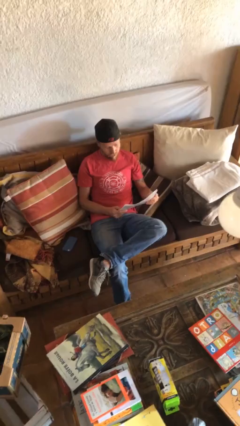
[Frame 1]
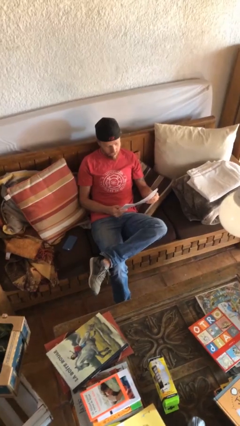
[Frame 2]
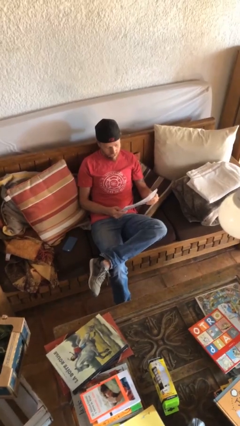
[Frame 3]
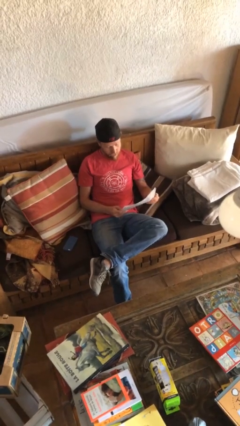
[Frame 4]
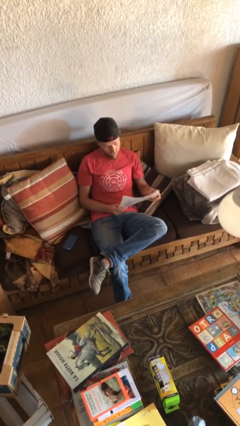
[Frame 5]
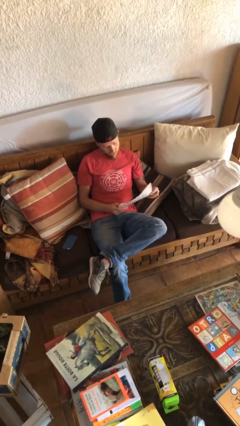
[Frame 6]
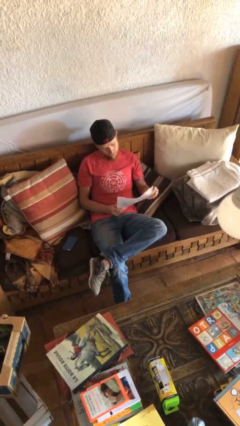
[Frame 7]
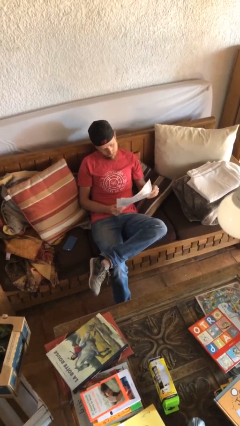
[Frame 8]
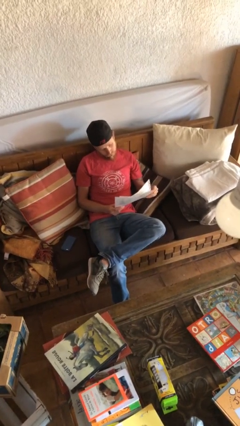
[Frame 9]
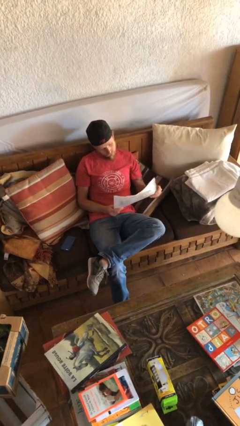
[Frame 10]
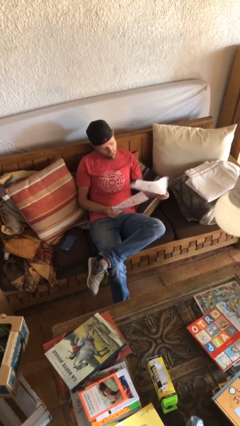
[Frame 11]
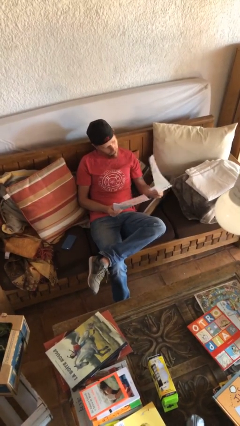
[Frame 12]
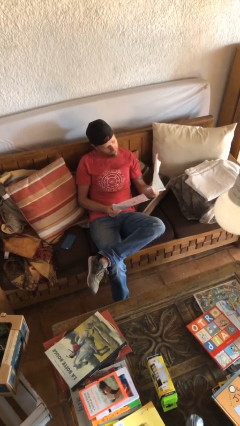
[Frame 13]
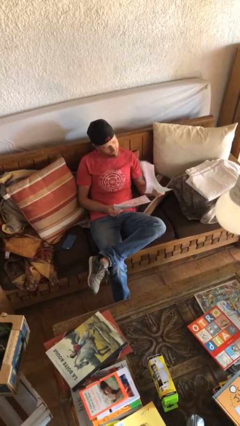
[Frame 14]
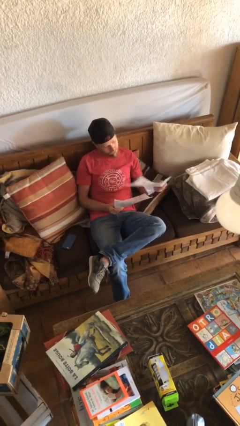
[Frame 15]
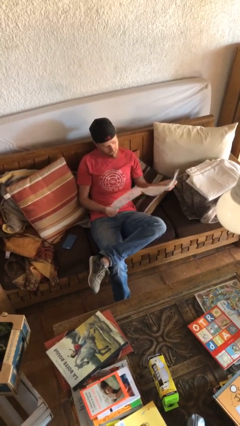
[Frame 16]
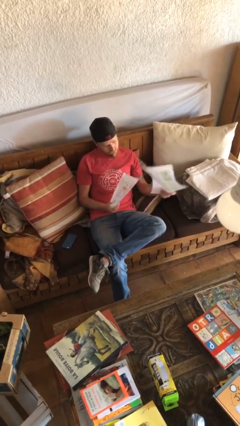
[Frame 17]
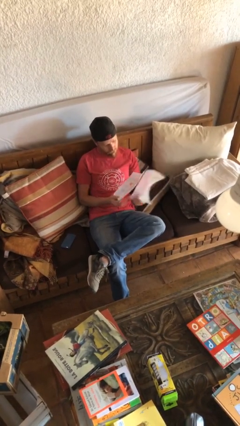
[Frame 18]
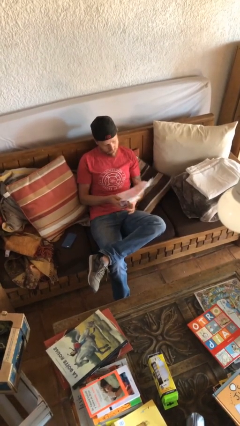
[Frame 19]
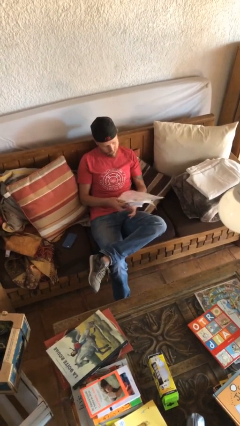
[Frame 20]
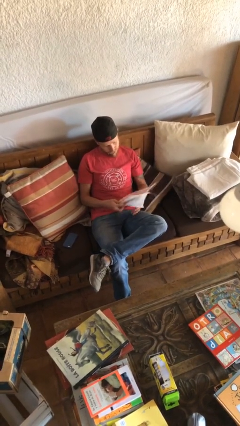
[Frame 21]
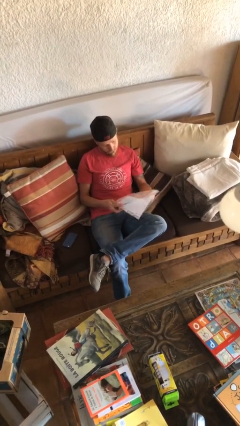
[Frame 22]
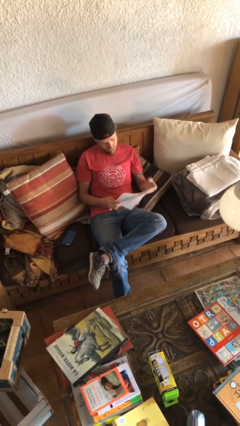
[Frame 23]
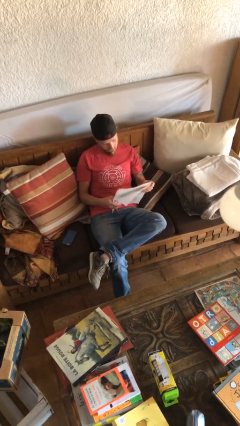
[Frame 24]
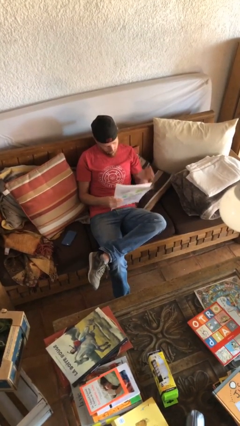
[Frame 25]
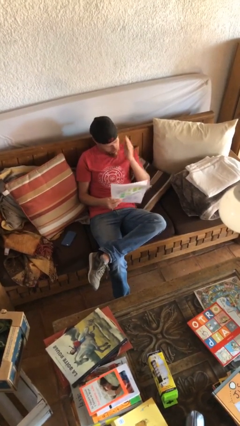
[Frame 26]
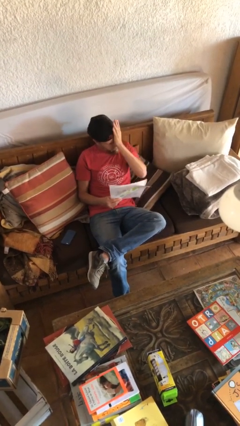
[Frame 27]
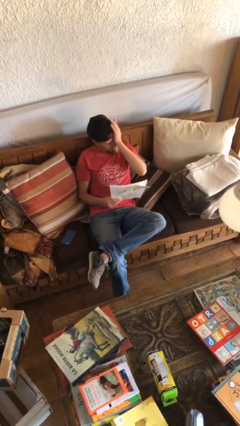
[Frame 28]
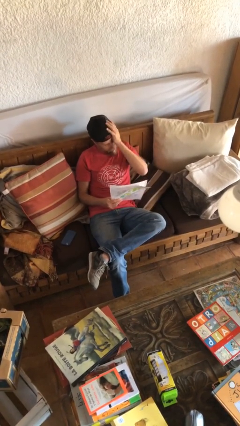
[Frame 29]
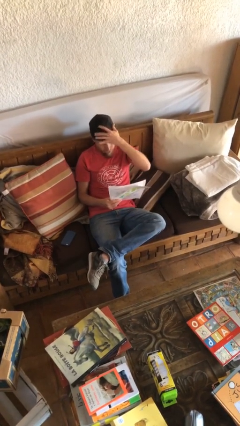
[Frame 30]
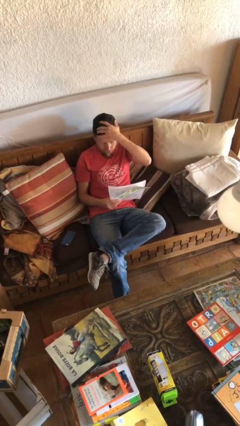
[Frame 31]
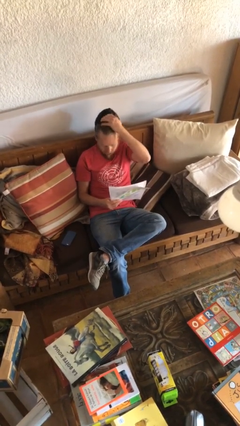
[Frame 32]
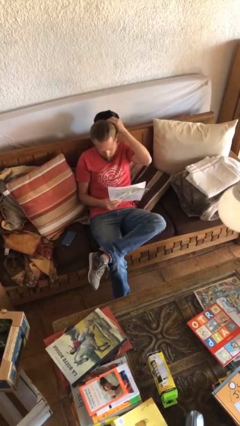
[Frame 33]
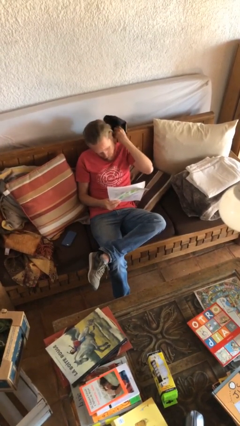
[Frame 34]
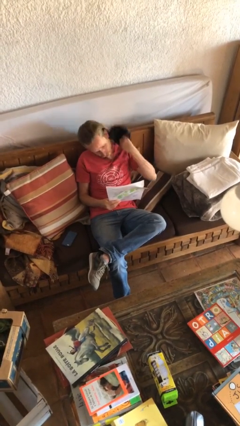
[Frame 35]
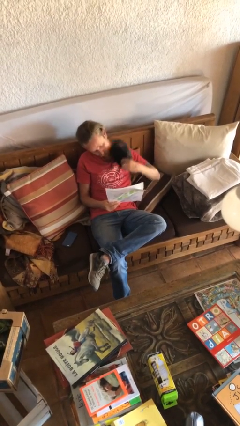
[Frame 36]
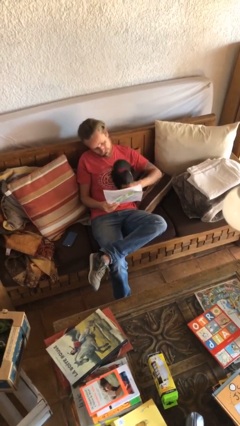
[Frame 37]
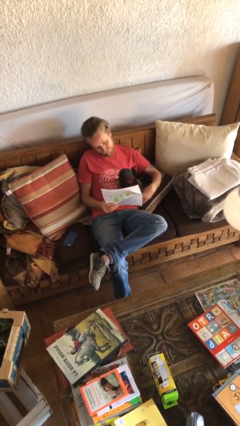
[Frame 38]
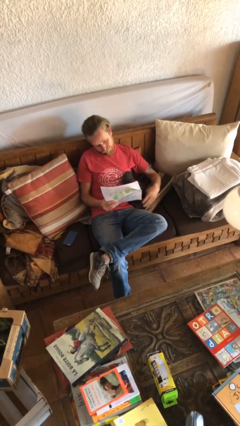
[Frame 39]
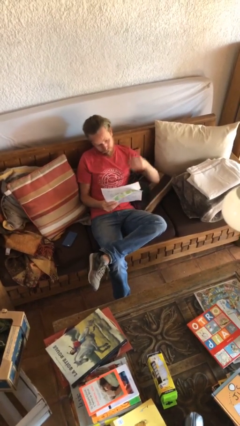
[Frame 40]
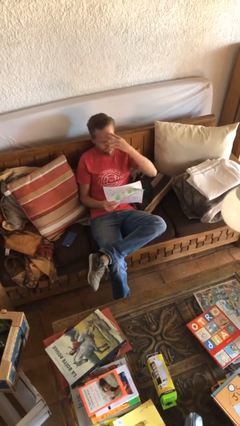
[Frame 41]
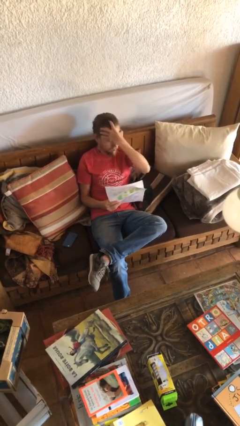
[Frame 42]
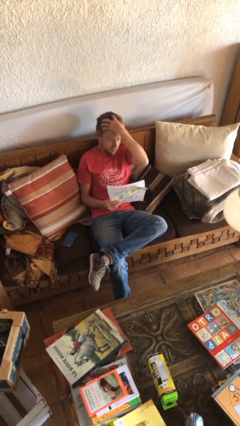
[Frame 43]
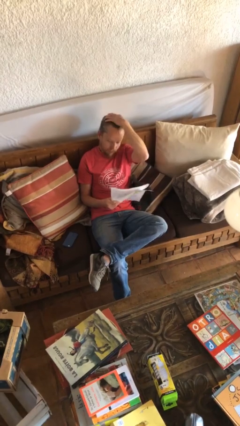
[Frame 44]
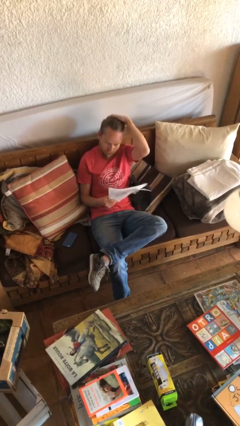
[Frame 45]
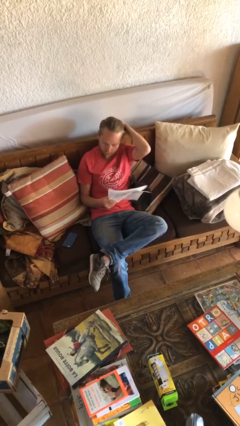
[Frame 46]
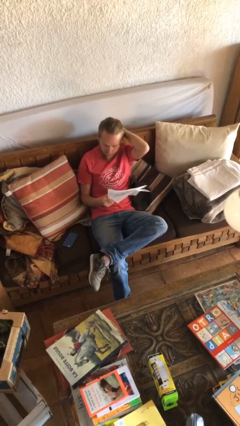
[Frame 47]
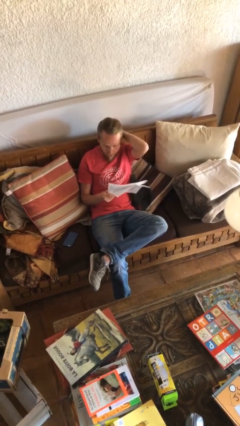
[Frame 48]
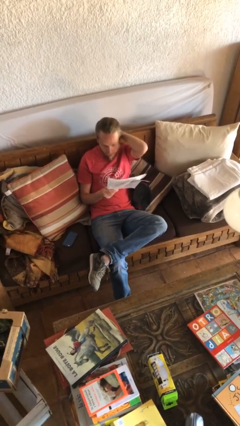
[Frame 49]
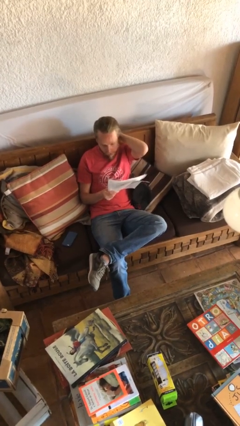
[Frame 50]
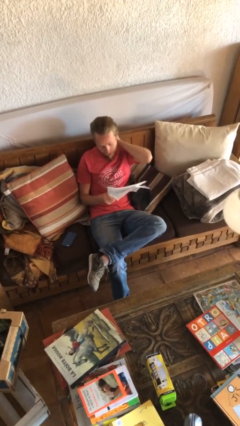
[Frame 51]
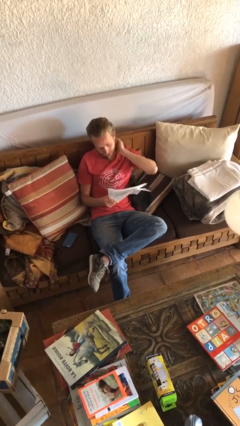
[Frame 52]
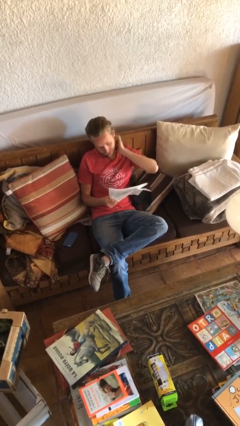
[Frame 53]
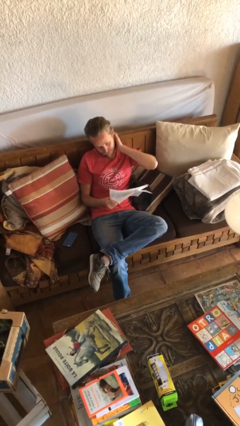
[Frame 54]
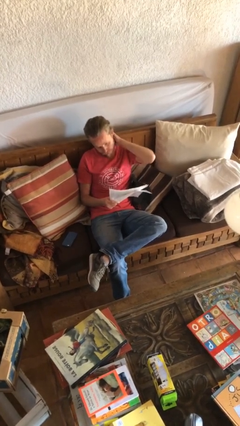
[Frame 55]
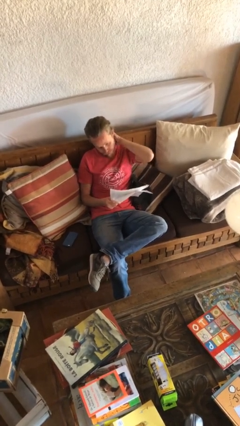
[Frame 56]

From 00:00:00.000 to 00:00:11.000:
person reads document

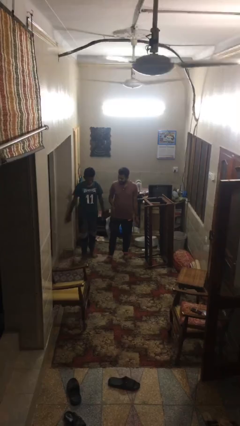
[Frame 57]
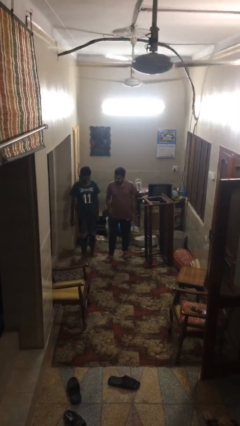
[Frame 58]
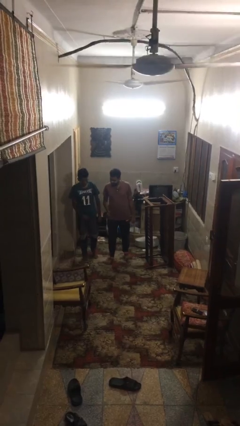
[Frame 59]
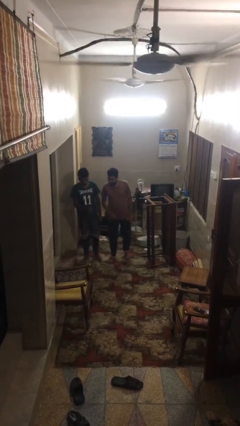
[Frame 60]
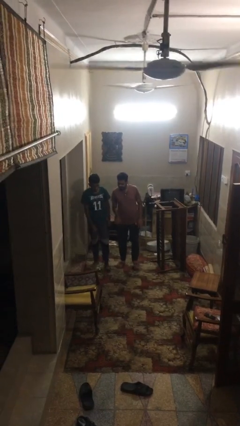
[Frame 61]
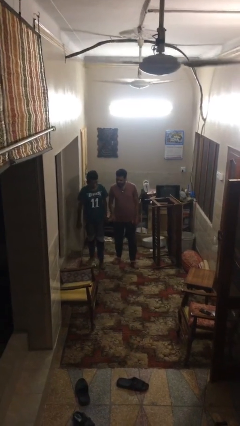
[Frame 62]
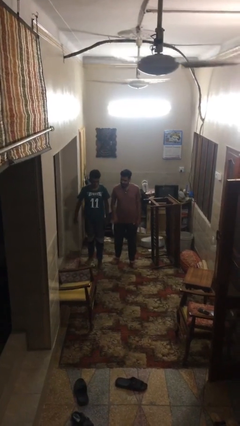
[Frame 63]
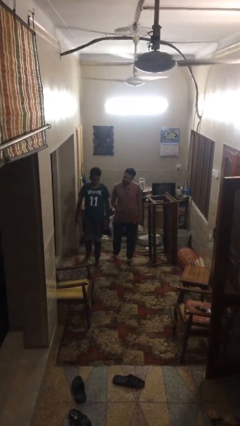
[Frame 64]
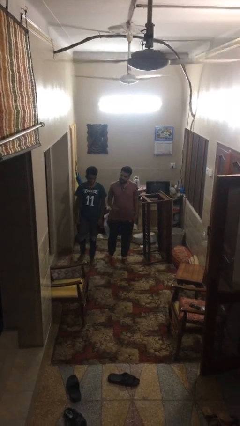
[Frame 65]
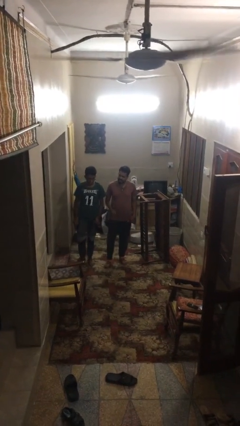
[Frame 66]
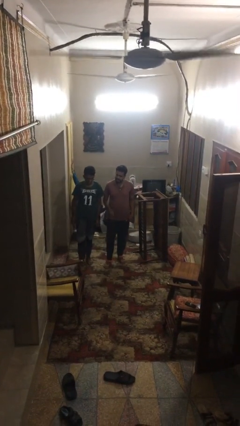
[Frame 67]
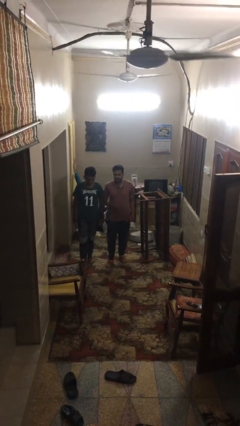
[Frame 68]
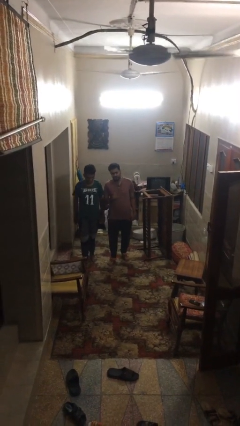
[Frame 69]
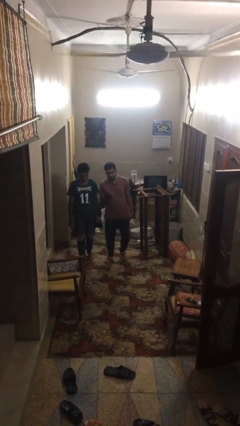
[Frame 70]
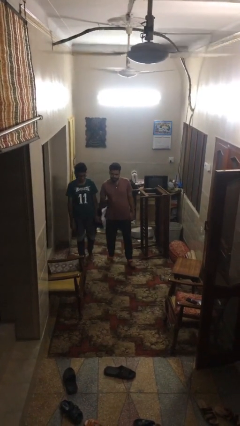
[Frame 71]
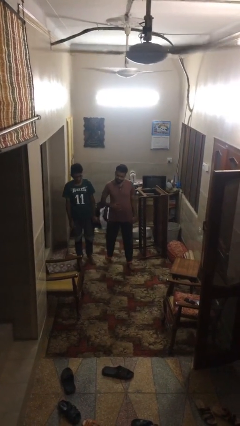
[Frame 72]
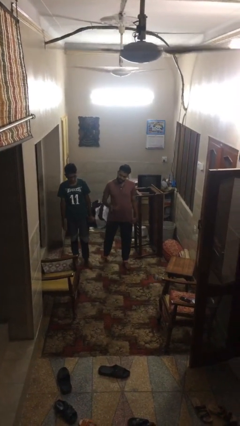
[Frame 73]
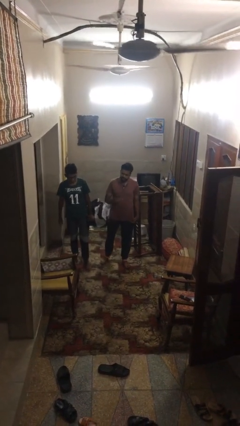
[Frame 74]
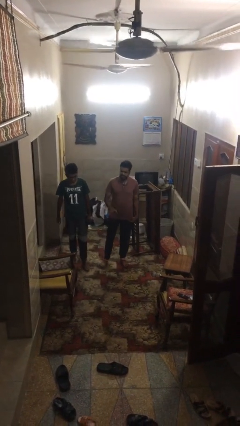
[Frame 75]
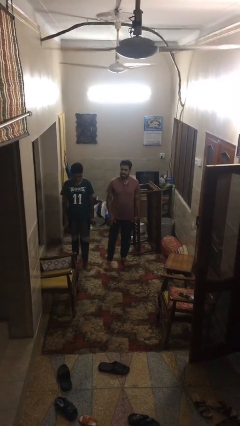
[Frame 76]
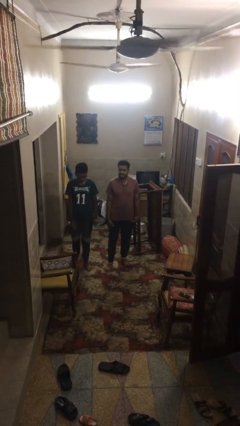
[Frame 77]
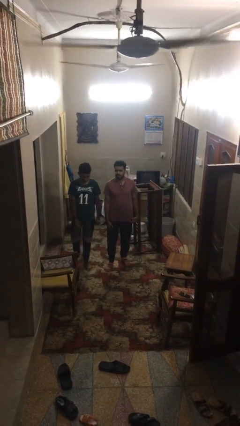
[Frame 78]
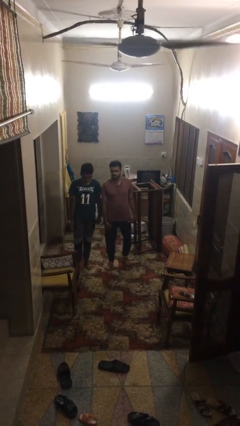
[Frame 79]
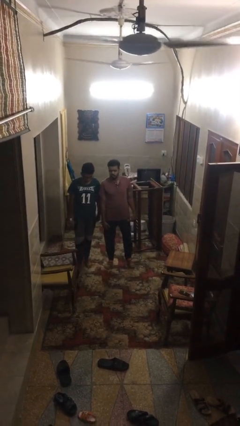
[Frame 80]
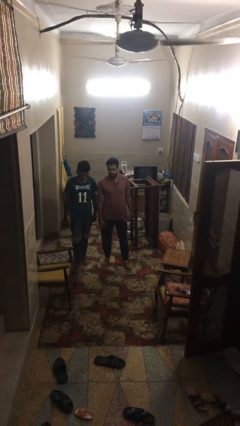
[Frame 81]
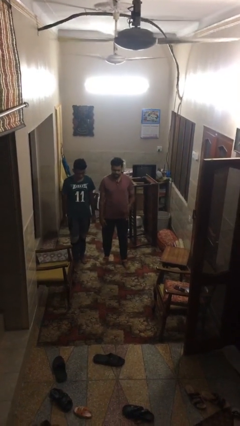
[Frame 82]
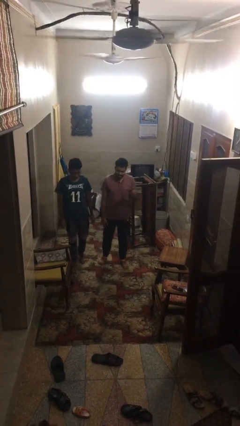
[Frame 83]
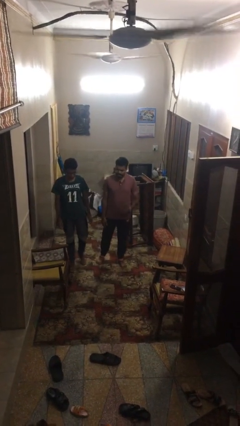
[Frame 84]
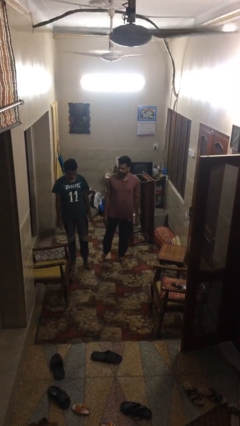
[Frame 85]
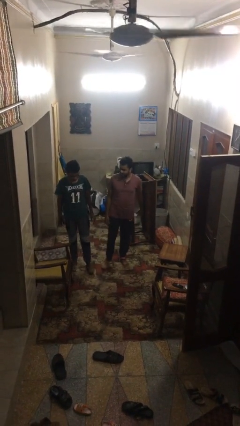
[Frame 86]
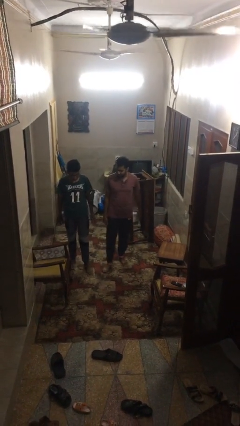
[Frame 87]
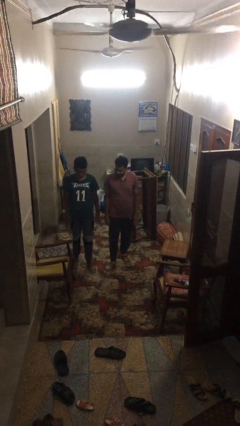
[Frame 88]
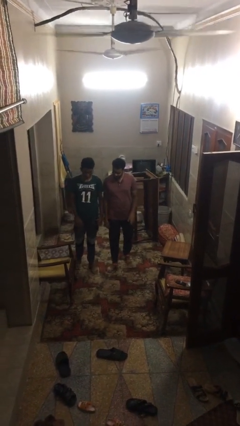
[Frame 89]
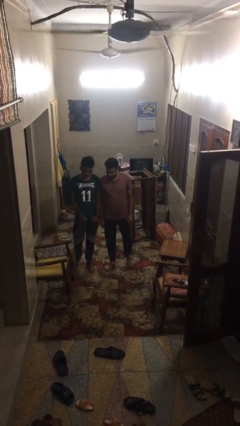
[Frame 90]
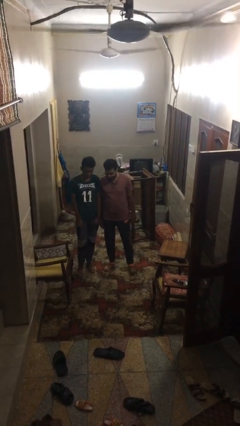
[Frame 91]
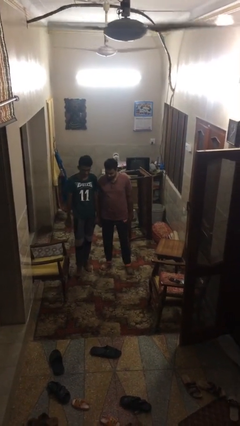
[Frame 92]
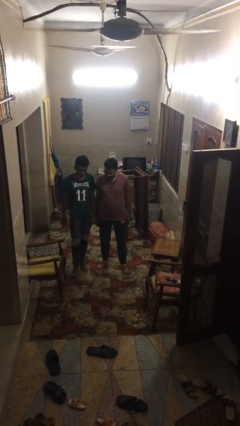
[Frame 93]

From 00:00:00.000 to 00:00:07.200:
person talks to person
